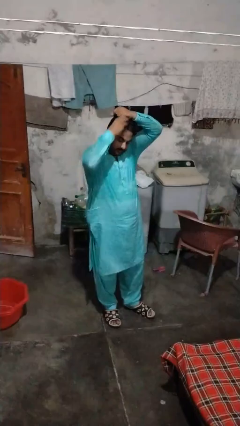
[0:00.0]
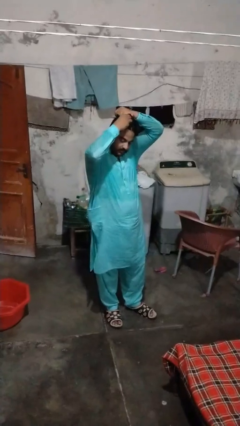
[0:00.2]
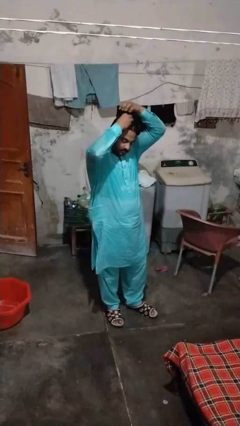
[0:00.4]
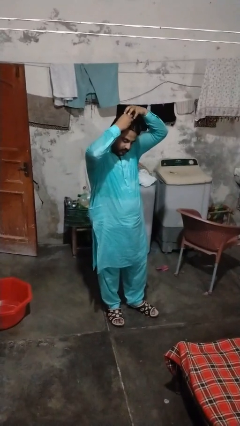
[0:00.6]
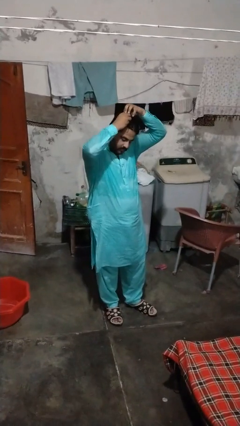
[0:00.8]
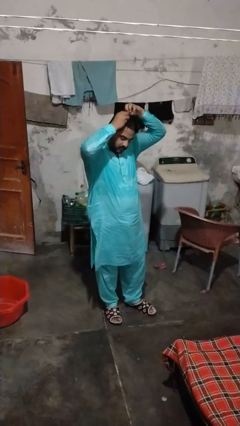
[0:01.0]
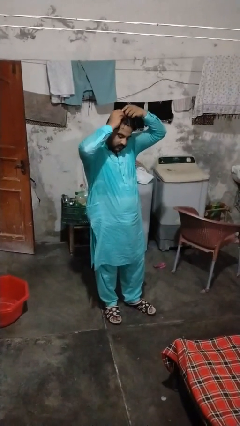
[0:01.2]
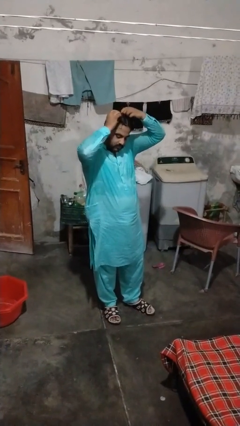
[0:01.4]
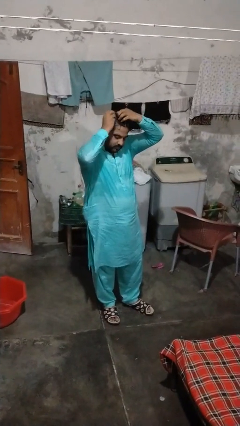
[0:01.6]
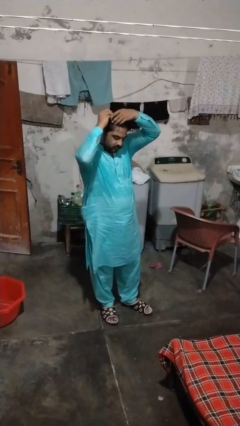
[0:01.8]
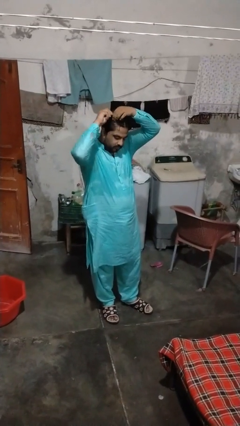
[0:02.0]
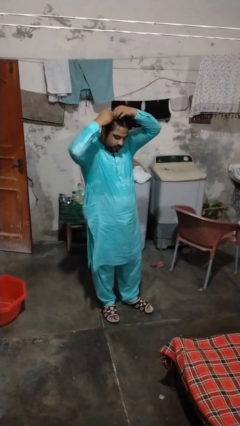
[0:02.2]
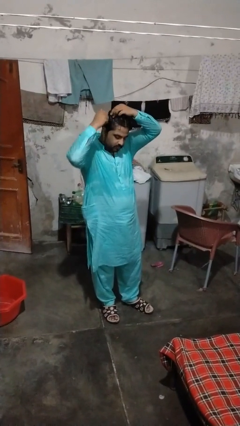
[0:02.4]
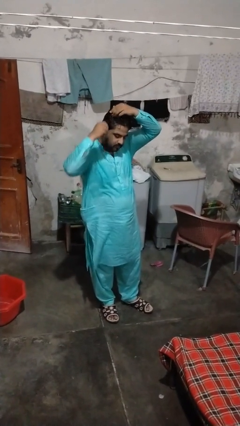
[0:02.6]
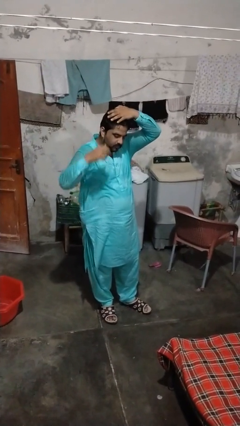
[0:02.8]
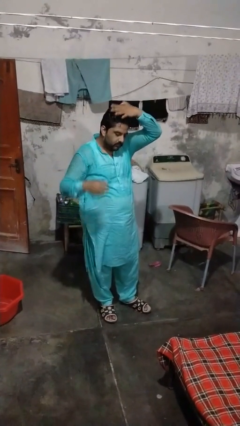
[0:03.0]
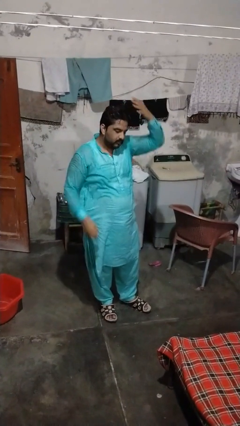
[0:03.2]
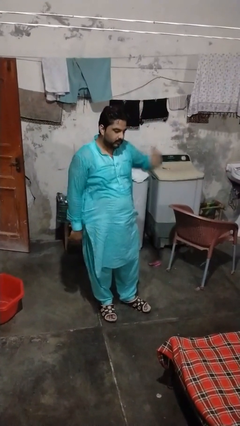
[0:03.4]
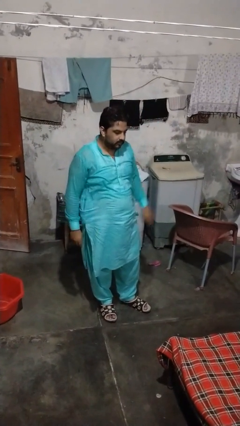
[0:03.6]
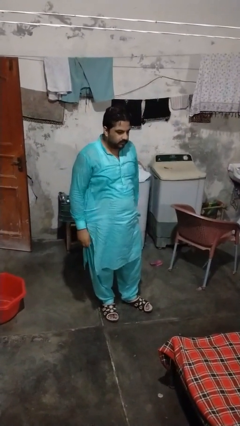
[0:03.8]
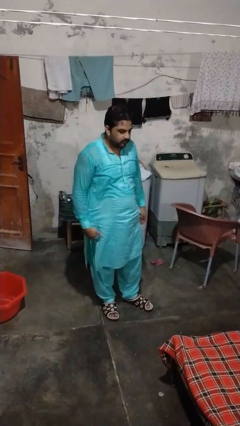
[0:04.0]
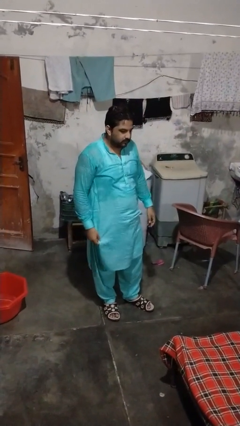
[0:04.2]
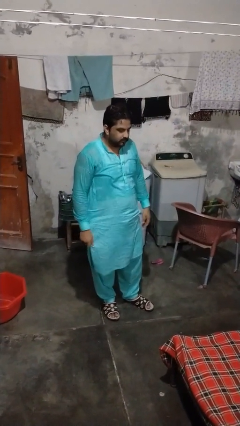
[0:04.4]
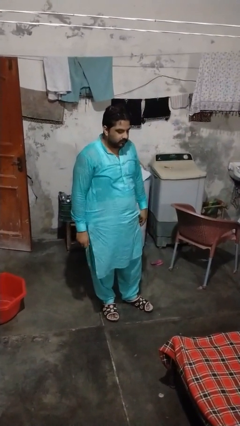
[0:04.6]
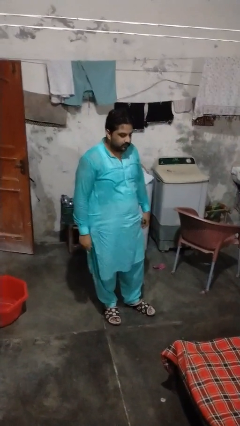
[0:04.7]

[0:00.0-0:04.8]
person puts hair in ponytail

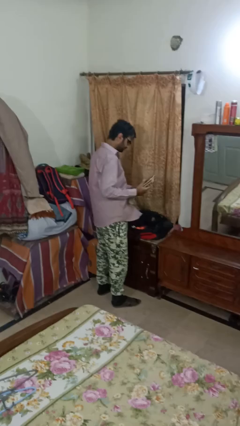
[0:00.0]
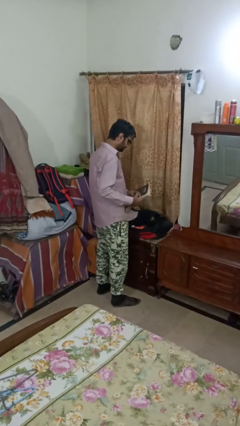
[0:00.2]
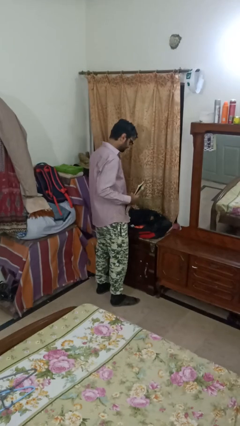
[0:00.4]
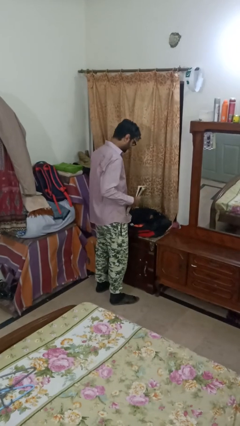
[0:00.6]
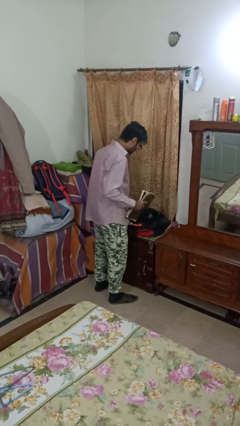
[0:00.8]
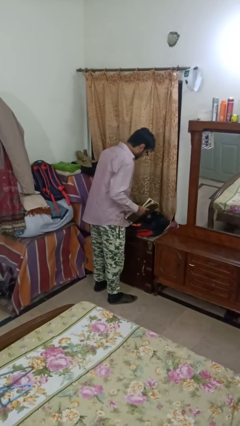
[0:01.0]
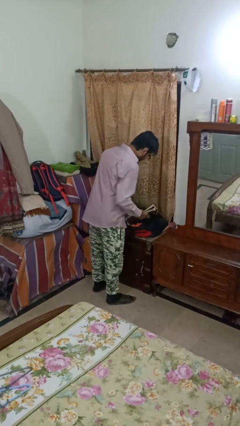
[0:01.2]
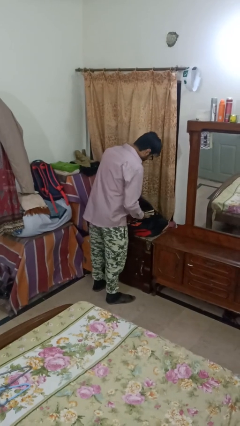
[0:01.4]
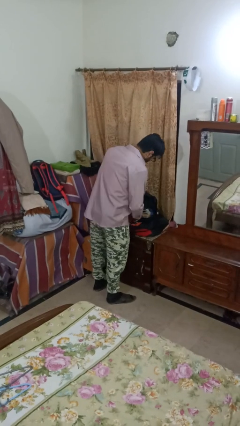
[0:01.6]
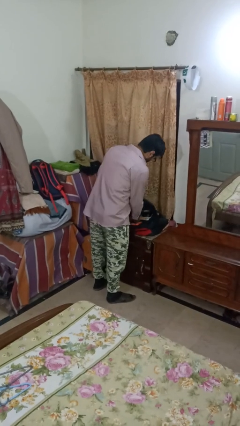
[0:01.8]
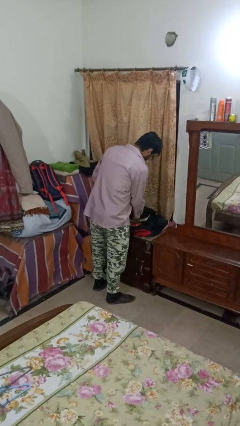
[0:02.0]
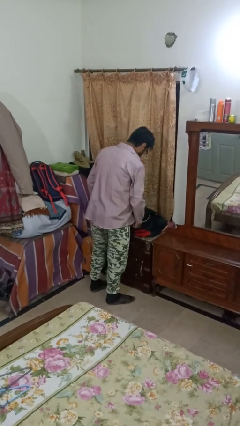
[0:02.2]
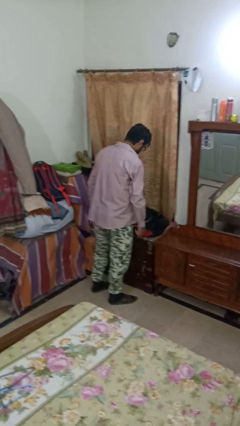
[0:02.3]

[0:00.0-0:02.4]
person puts object into bag

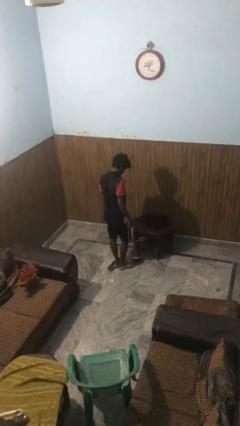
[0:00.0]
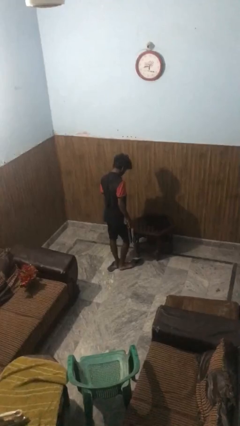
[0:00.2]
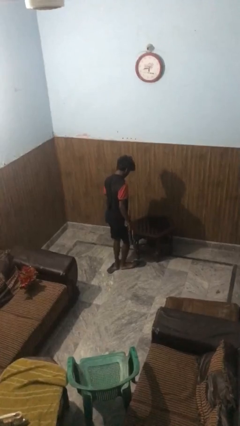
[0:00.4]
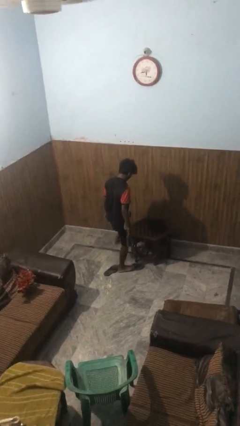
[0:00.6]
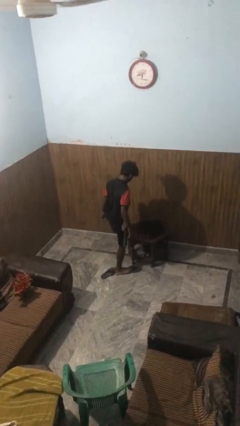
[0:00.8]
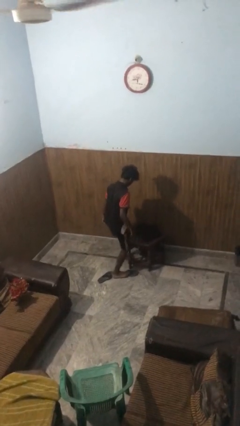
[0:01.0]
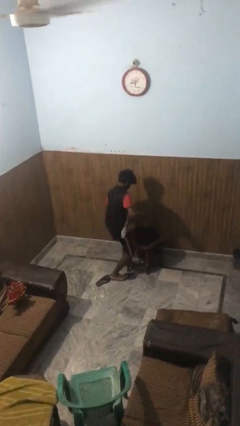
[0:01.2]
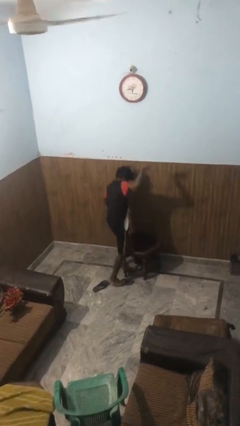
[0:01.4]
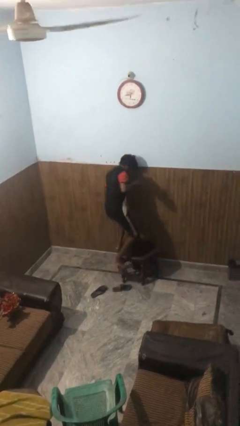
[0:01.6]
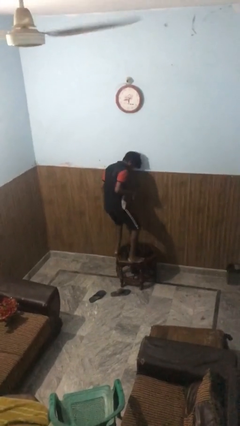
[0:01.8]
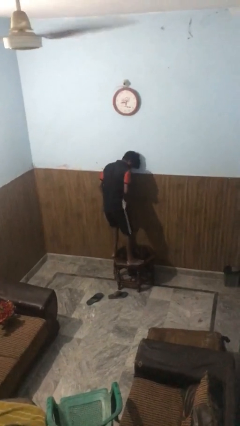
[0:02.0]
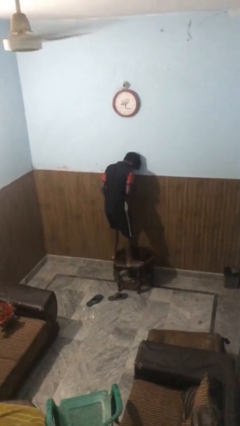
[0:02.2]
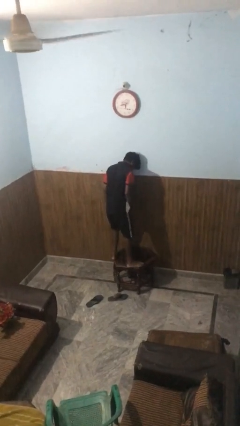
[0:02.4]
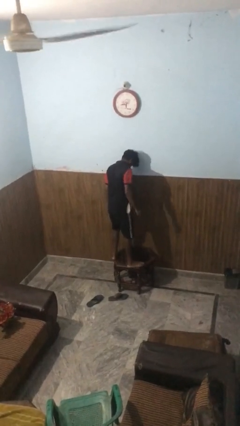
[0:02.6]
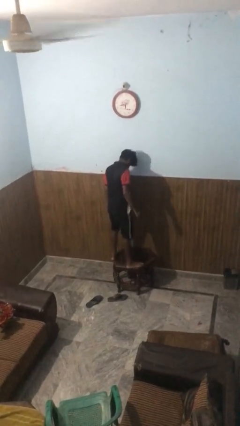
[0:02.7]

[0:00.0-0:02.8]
person climbs on table

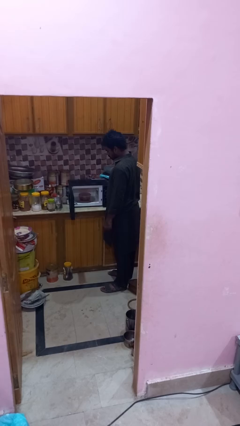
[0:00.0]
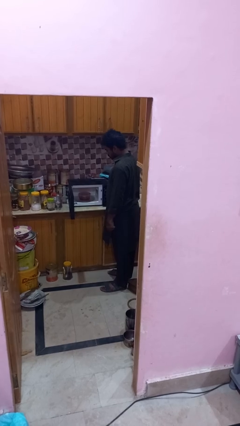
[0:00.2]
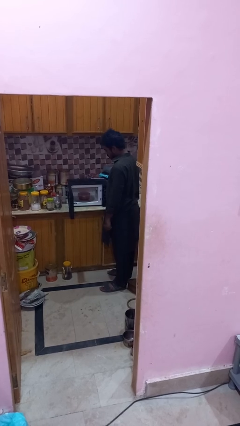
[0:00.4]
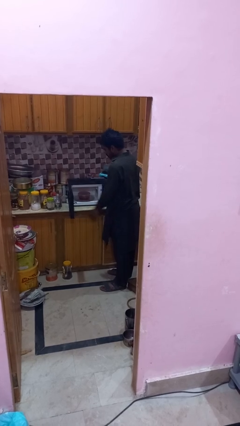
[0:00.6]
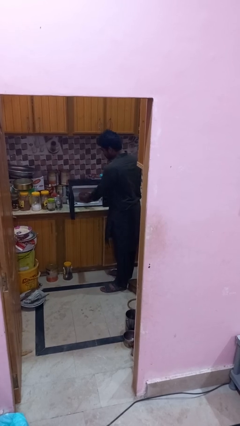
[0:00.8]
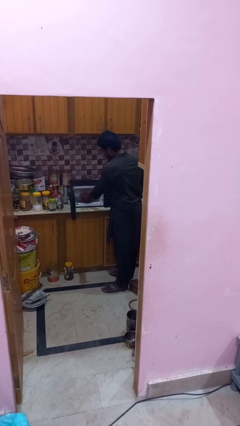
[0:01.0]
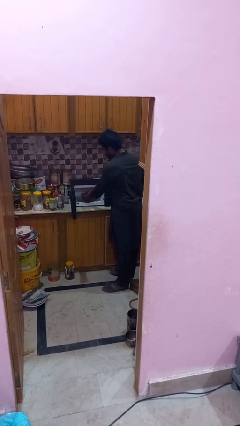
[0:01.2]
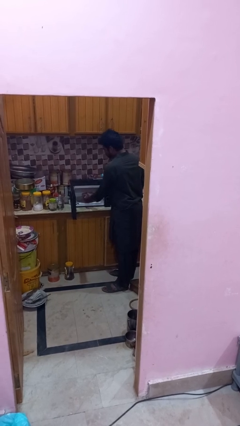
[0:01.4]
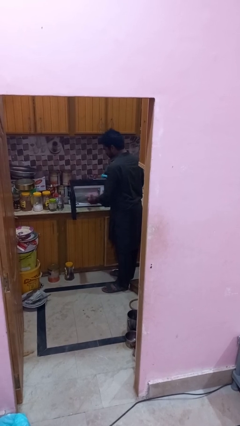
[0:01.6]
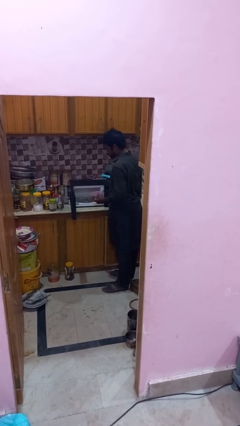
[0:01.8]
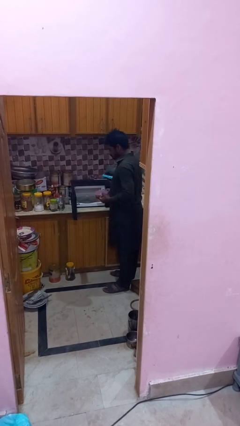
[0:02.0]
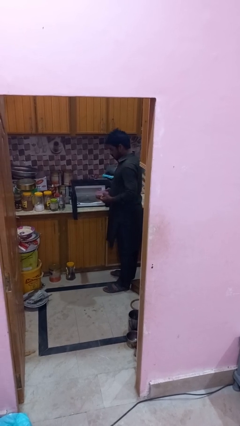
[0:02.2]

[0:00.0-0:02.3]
person takes object from microwave

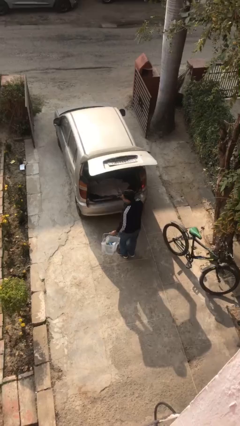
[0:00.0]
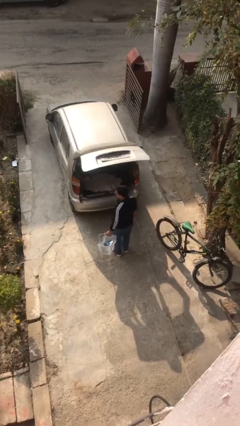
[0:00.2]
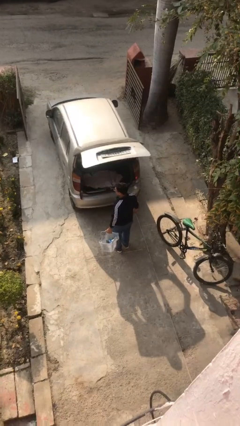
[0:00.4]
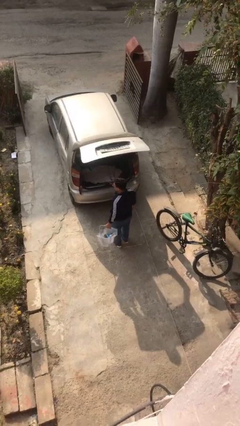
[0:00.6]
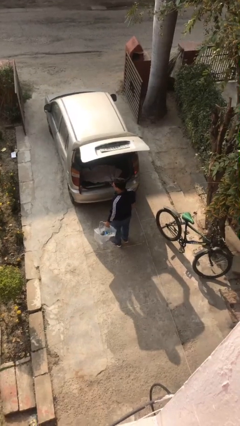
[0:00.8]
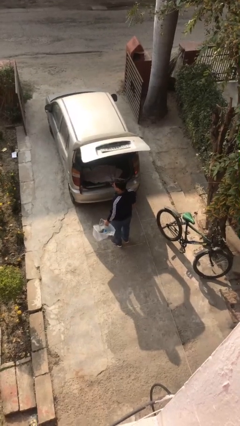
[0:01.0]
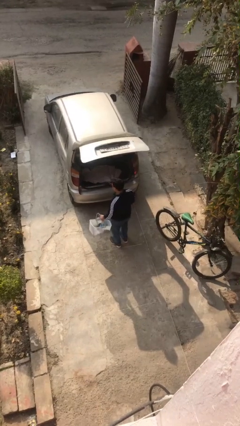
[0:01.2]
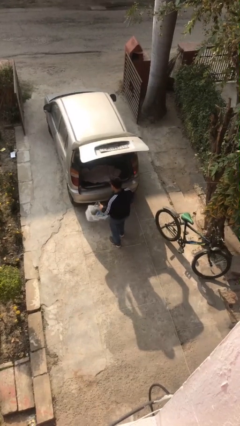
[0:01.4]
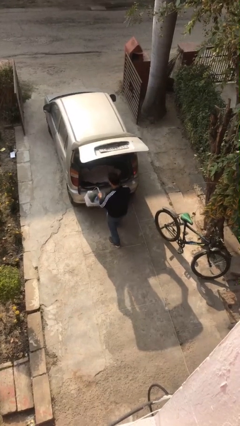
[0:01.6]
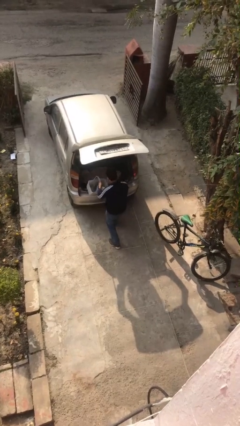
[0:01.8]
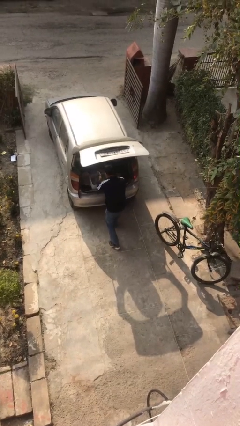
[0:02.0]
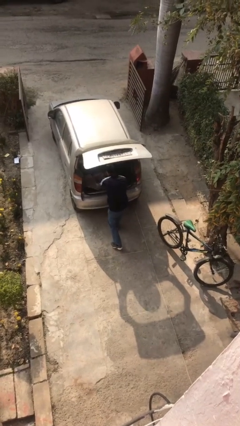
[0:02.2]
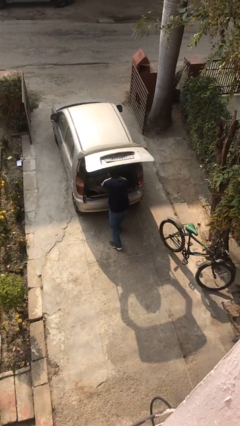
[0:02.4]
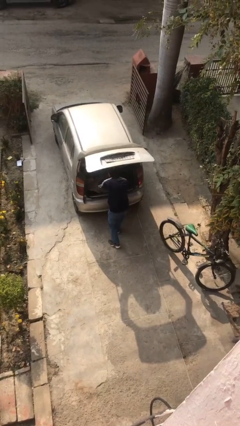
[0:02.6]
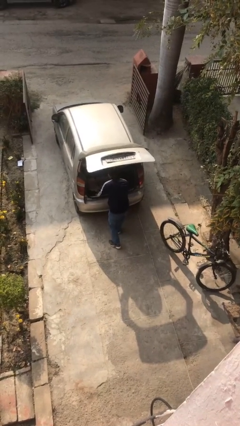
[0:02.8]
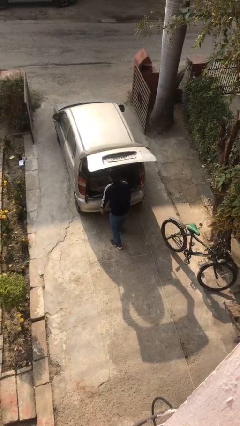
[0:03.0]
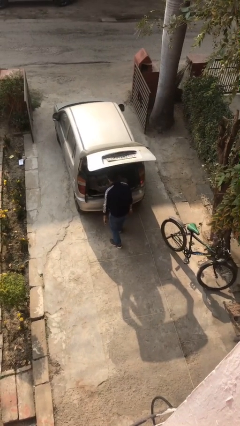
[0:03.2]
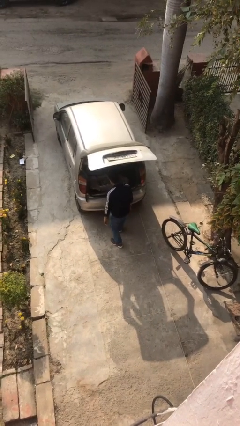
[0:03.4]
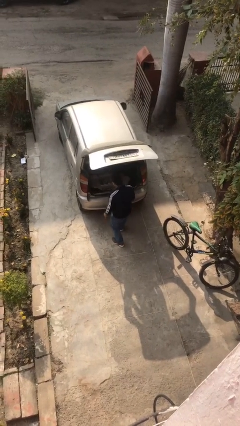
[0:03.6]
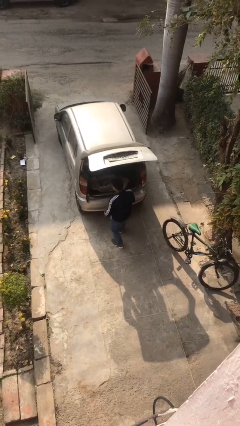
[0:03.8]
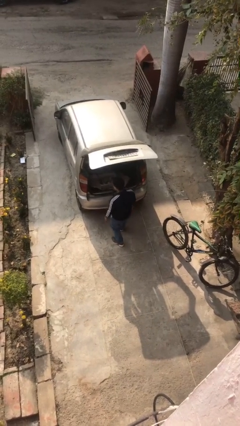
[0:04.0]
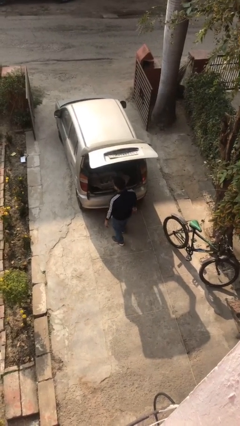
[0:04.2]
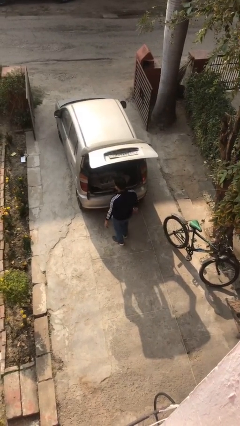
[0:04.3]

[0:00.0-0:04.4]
person loads car

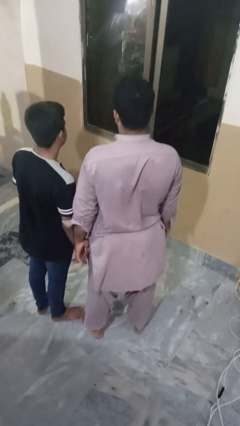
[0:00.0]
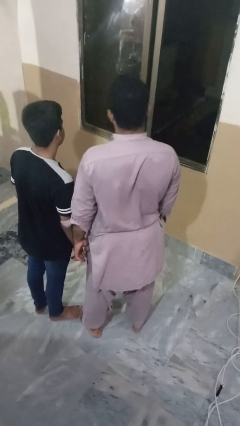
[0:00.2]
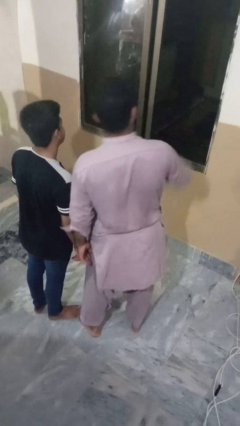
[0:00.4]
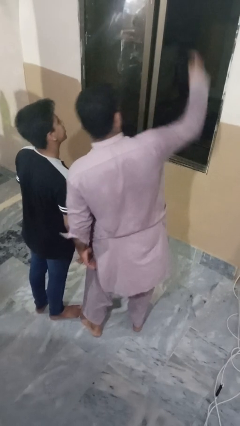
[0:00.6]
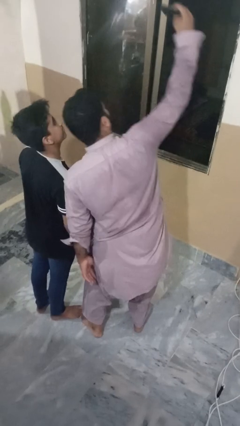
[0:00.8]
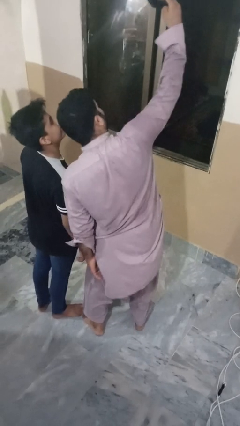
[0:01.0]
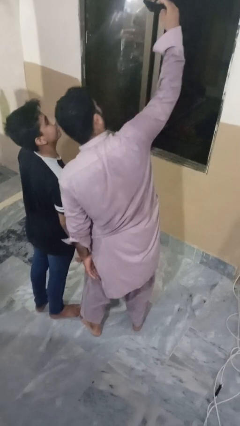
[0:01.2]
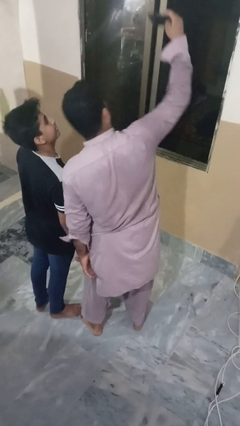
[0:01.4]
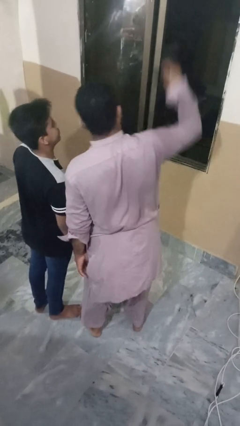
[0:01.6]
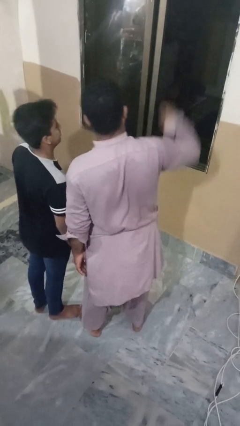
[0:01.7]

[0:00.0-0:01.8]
person takes selfie with person
